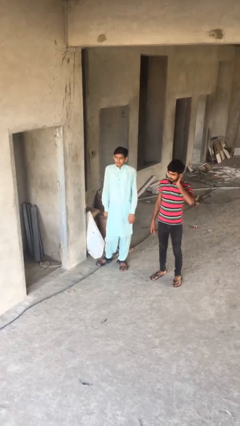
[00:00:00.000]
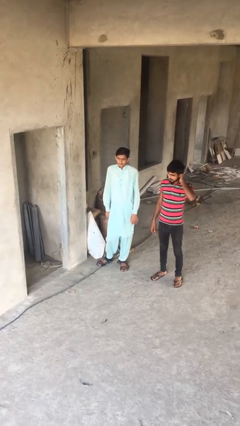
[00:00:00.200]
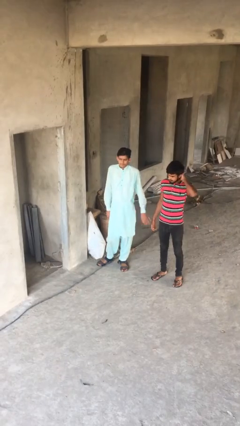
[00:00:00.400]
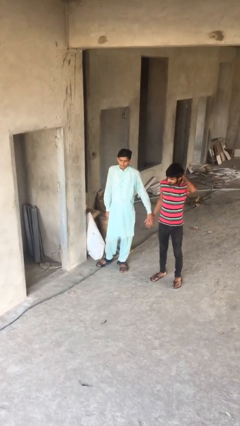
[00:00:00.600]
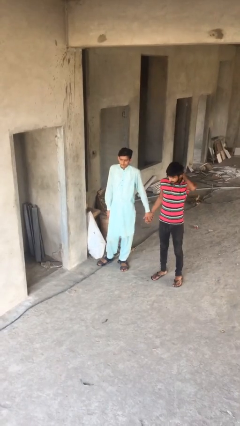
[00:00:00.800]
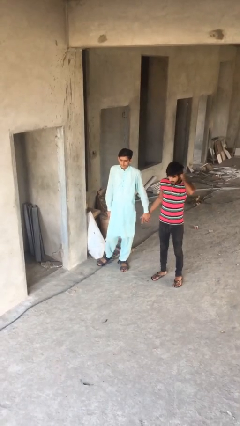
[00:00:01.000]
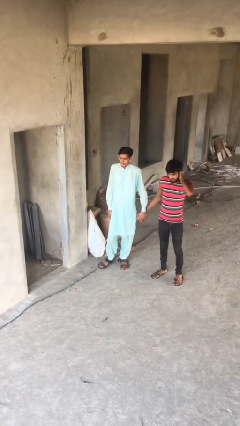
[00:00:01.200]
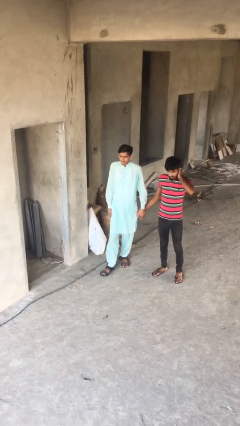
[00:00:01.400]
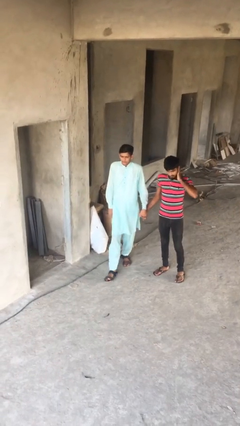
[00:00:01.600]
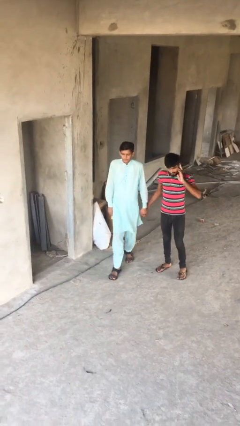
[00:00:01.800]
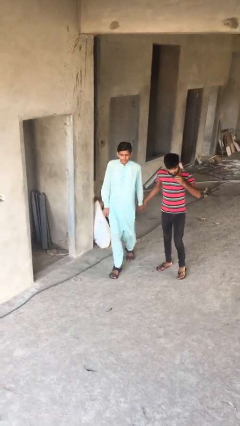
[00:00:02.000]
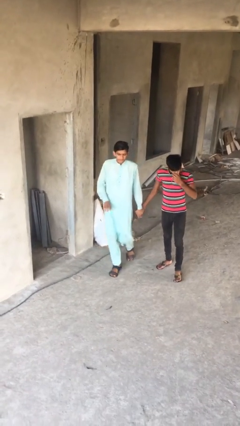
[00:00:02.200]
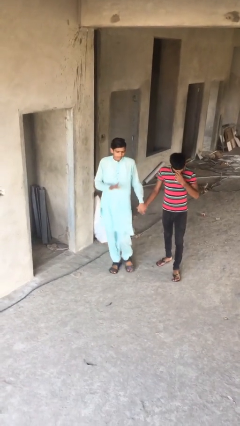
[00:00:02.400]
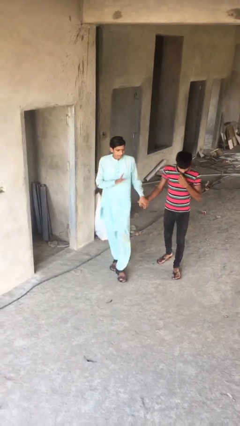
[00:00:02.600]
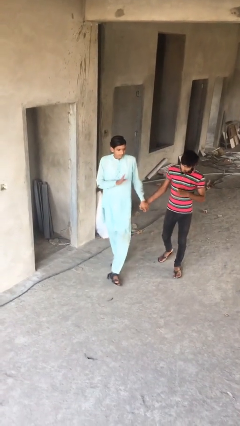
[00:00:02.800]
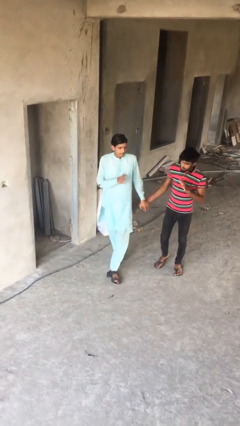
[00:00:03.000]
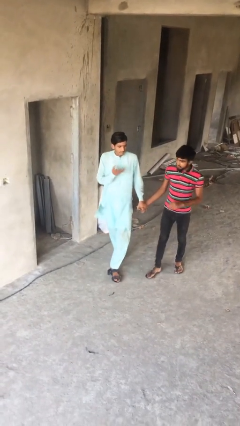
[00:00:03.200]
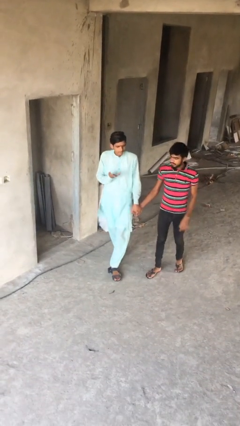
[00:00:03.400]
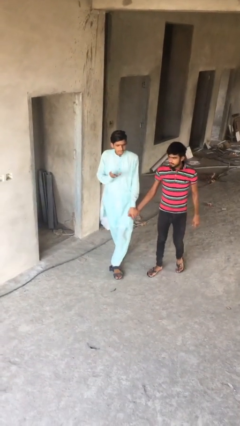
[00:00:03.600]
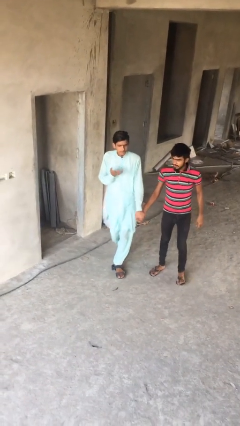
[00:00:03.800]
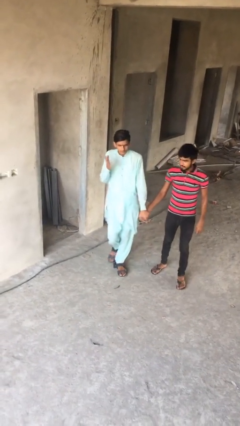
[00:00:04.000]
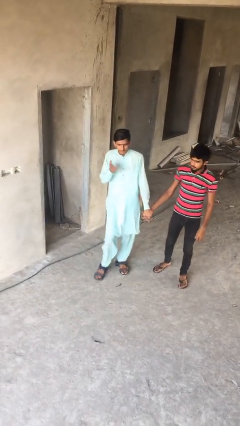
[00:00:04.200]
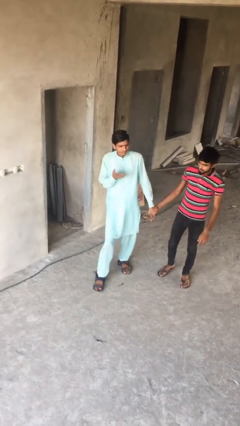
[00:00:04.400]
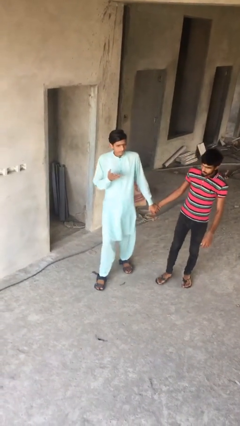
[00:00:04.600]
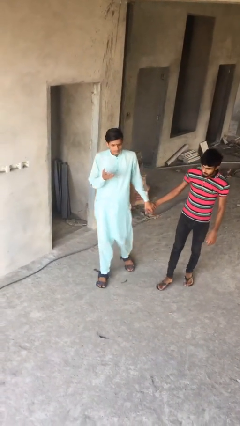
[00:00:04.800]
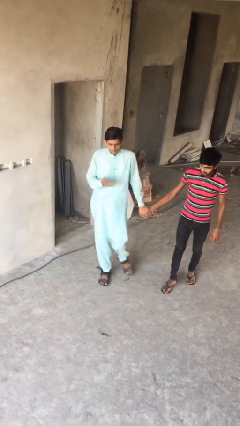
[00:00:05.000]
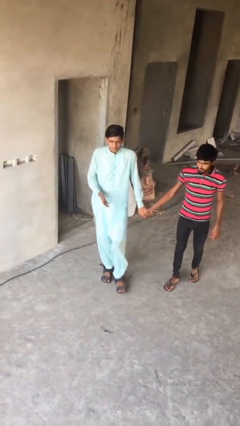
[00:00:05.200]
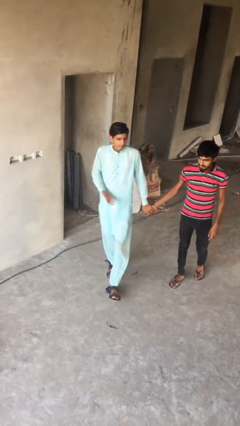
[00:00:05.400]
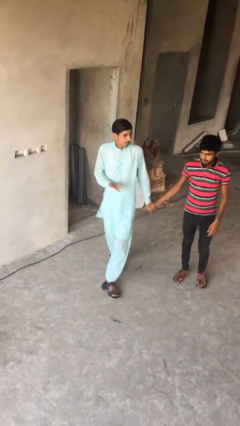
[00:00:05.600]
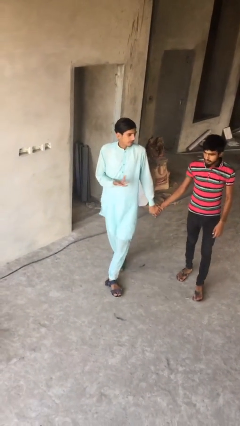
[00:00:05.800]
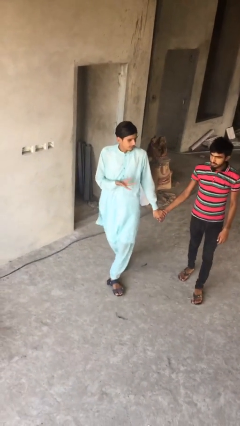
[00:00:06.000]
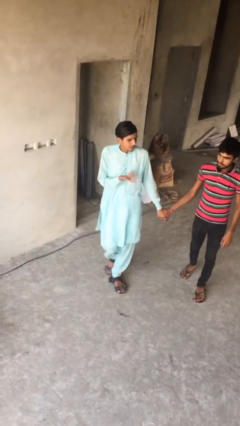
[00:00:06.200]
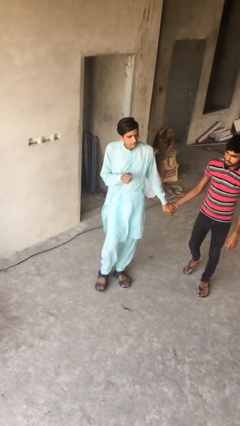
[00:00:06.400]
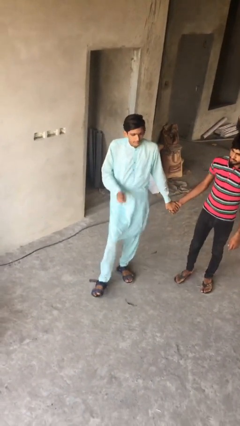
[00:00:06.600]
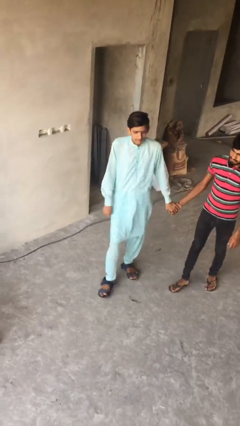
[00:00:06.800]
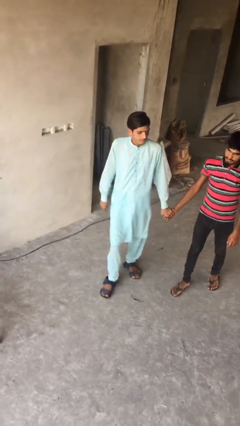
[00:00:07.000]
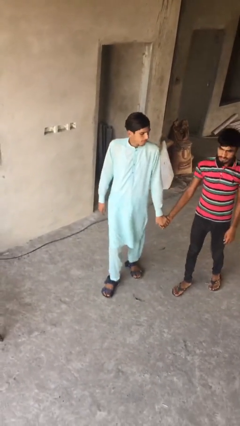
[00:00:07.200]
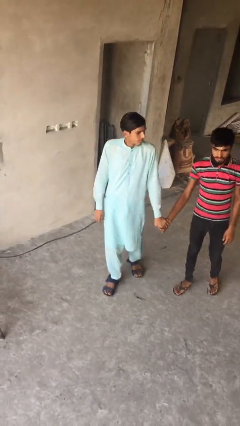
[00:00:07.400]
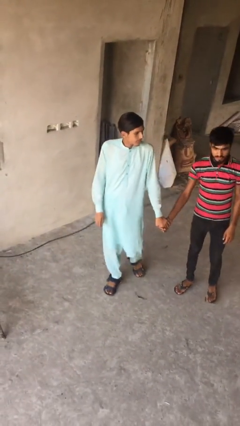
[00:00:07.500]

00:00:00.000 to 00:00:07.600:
person holds hand

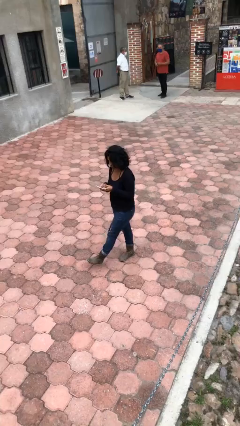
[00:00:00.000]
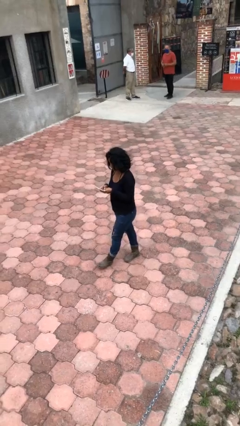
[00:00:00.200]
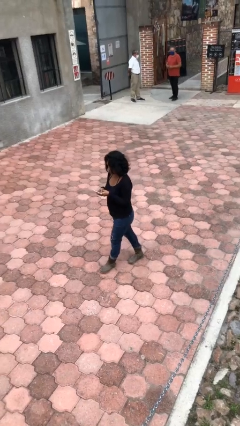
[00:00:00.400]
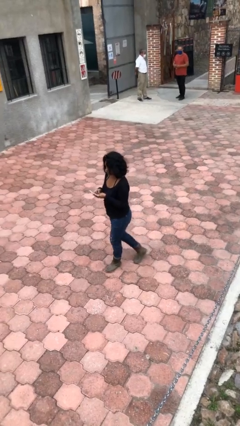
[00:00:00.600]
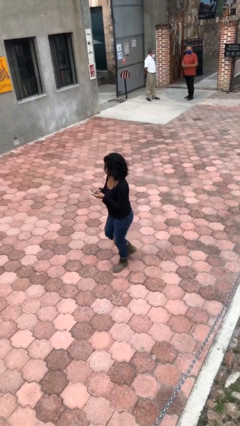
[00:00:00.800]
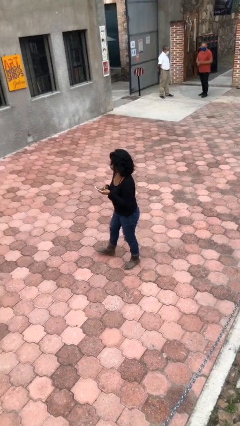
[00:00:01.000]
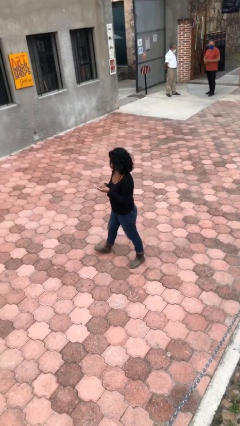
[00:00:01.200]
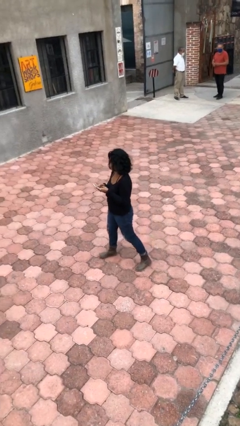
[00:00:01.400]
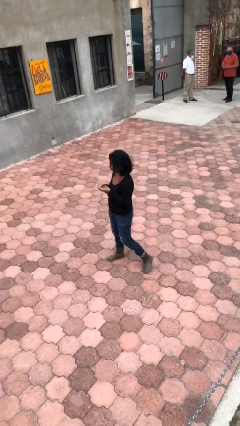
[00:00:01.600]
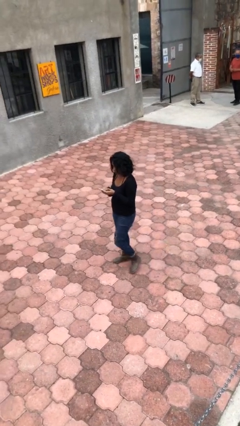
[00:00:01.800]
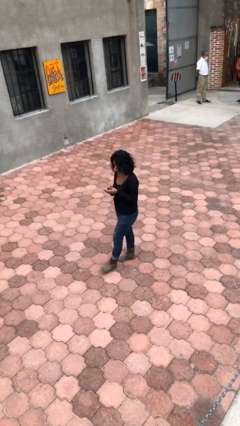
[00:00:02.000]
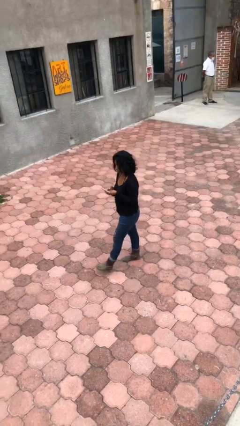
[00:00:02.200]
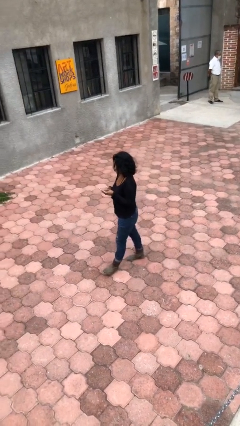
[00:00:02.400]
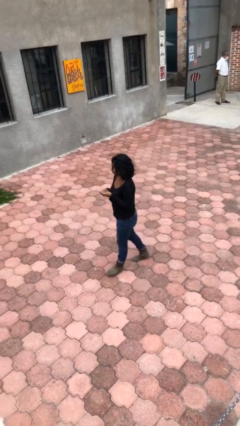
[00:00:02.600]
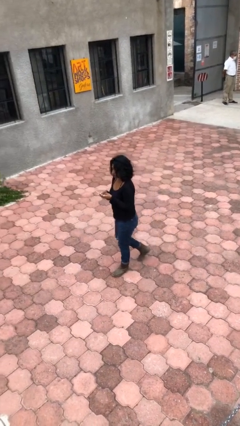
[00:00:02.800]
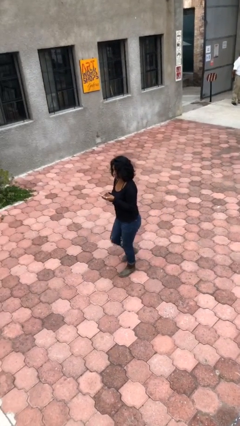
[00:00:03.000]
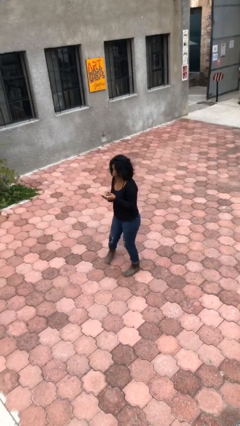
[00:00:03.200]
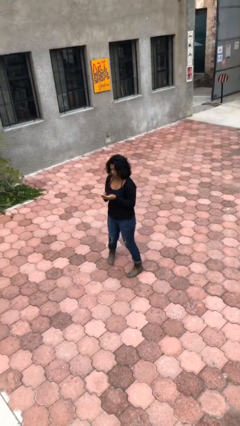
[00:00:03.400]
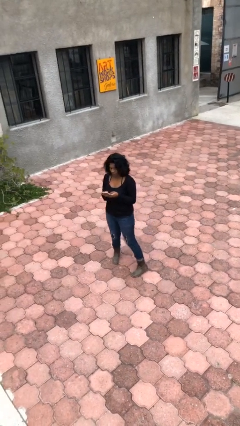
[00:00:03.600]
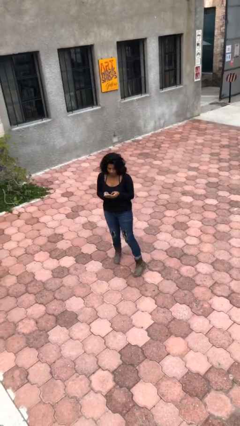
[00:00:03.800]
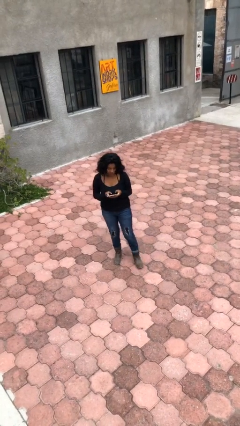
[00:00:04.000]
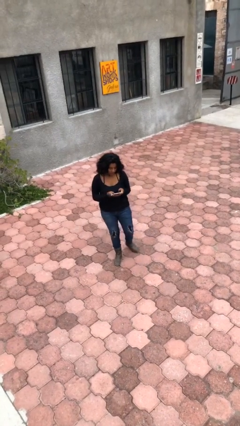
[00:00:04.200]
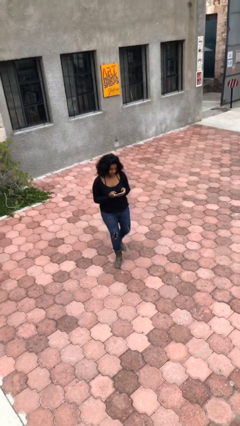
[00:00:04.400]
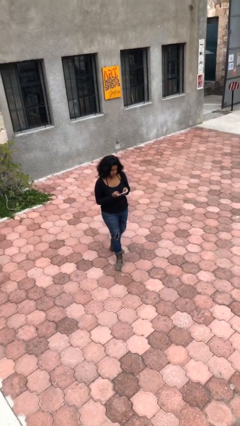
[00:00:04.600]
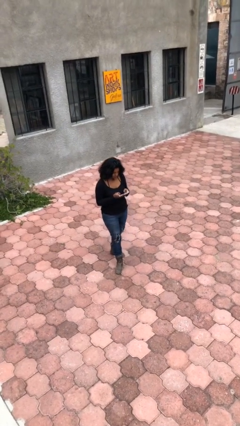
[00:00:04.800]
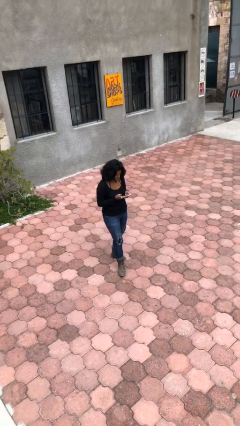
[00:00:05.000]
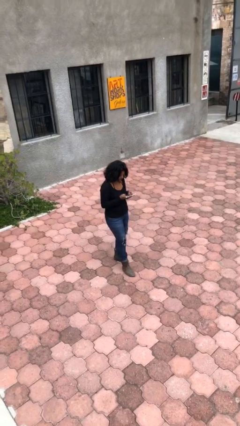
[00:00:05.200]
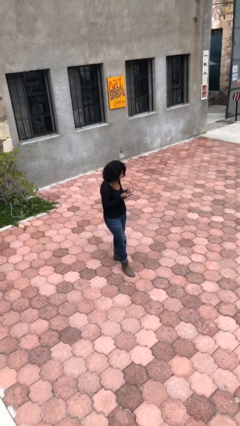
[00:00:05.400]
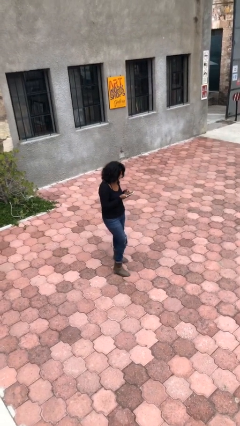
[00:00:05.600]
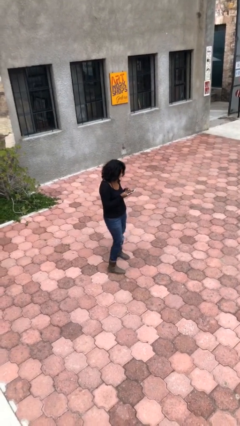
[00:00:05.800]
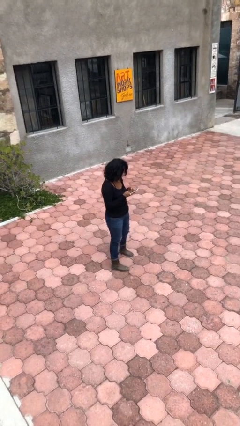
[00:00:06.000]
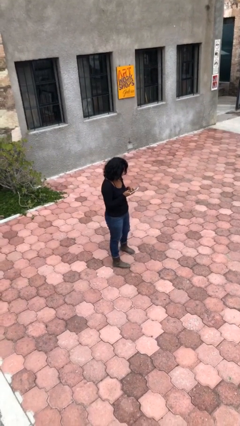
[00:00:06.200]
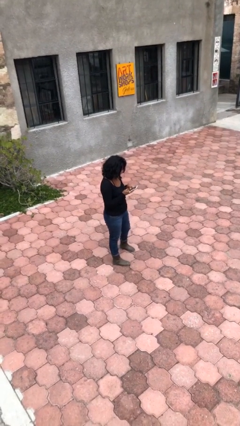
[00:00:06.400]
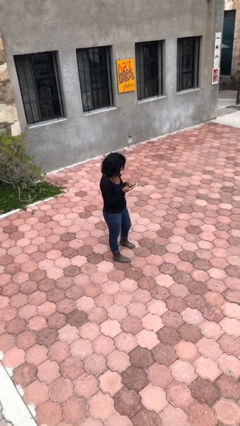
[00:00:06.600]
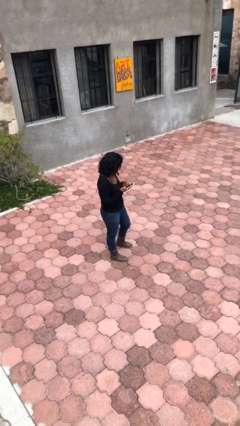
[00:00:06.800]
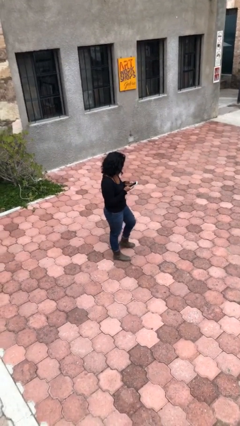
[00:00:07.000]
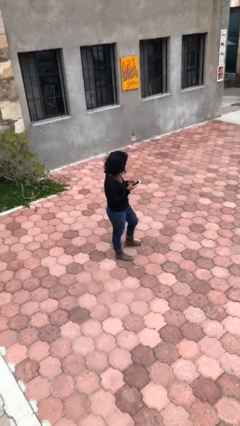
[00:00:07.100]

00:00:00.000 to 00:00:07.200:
person texts on phone

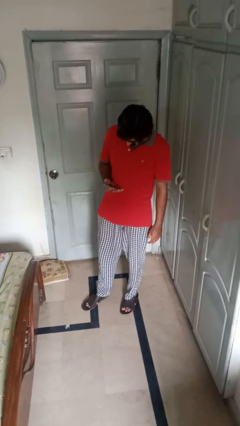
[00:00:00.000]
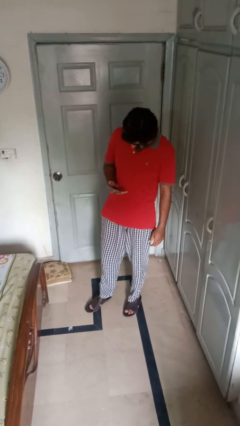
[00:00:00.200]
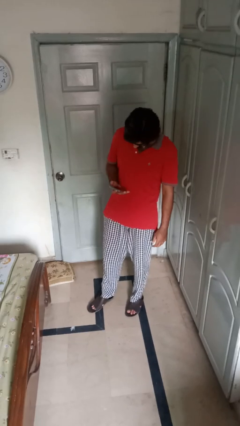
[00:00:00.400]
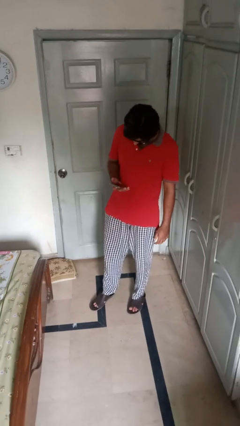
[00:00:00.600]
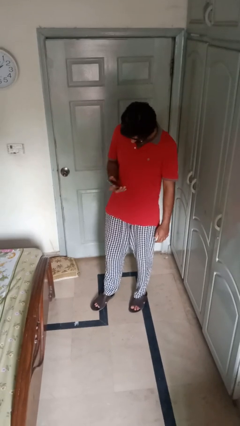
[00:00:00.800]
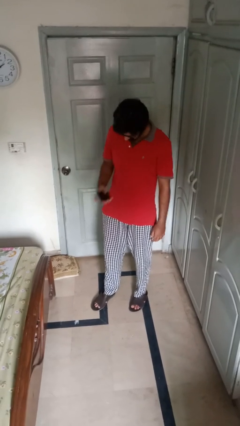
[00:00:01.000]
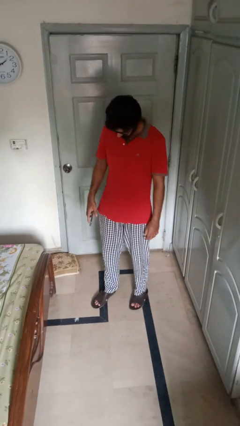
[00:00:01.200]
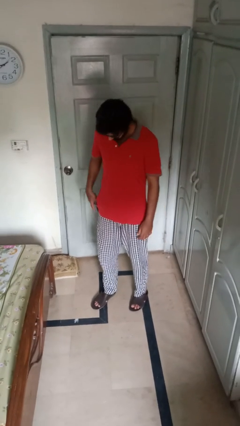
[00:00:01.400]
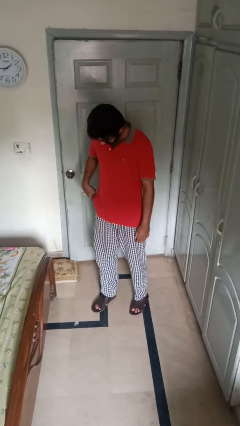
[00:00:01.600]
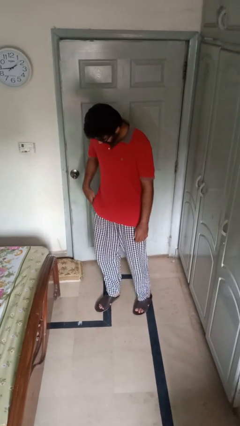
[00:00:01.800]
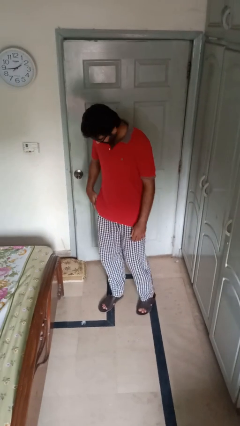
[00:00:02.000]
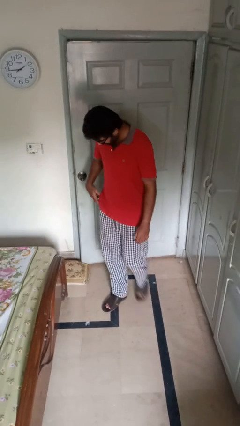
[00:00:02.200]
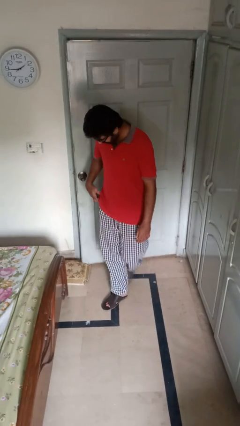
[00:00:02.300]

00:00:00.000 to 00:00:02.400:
person puts phone into pocket

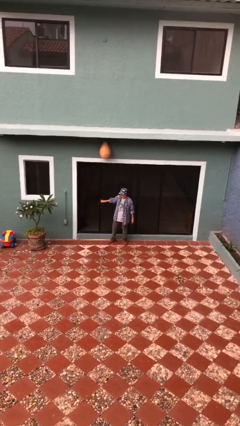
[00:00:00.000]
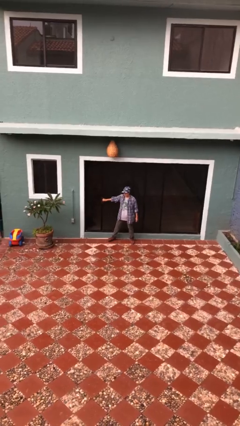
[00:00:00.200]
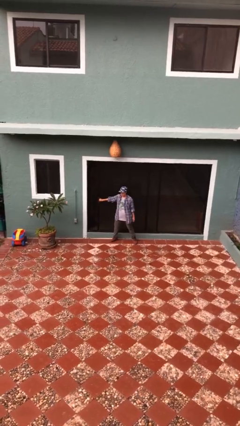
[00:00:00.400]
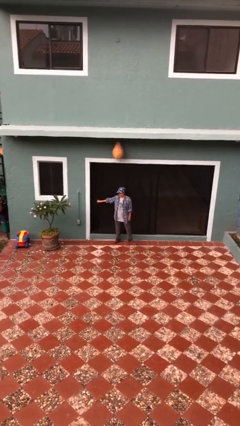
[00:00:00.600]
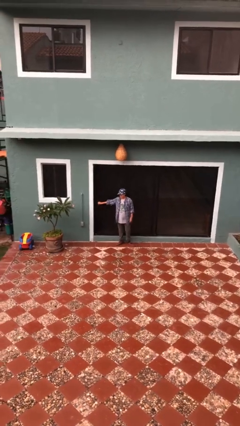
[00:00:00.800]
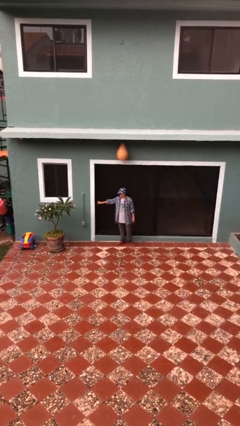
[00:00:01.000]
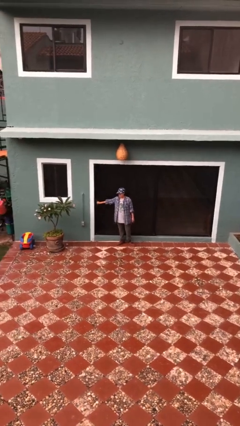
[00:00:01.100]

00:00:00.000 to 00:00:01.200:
person closes sliding door
